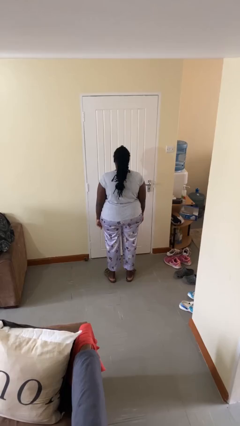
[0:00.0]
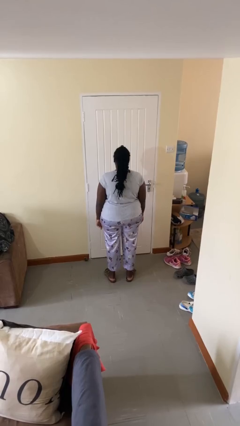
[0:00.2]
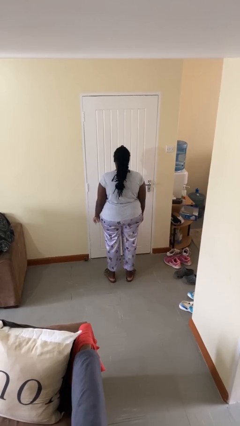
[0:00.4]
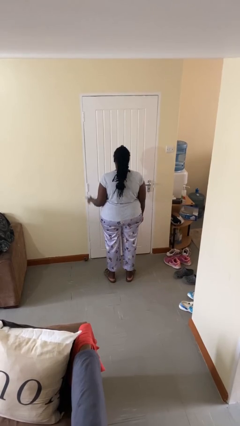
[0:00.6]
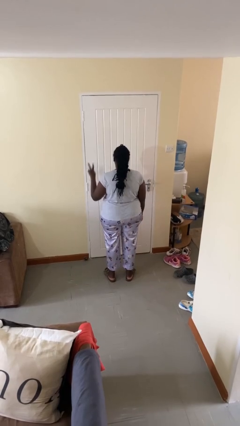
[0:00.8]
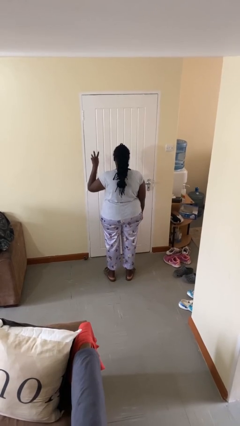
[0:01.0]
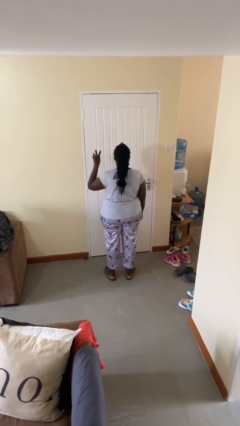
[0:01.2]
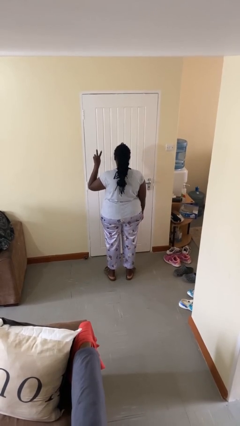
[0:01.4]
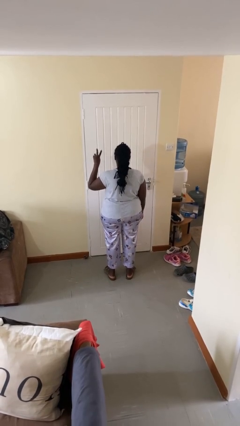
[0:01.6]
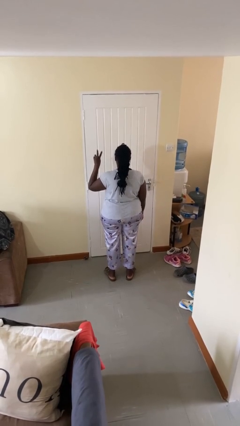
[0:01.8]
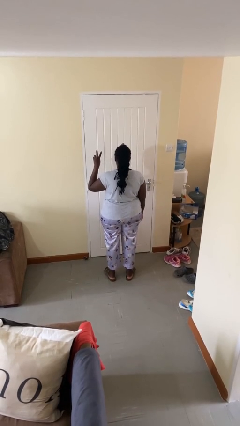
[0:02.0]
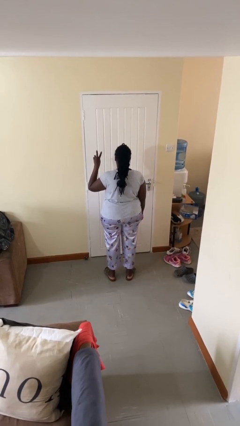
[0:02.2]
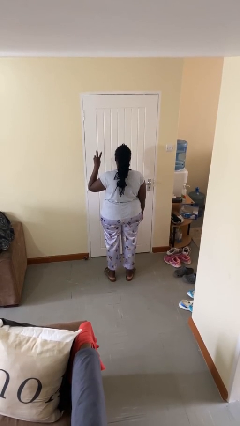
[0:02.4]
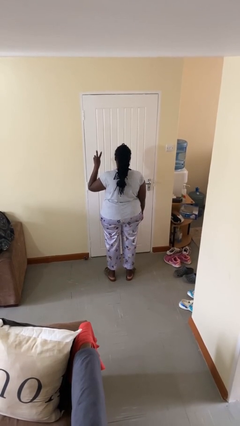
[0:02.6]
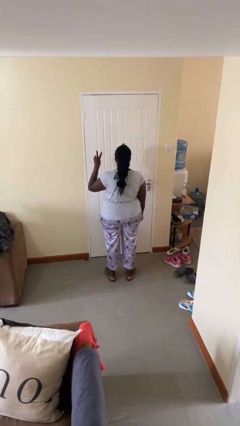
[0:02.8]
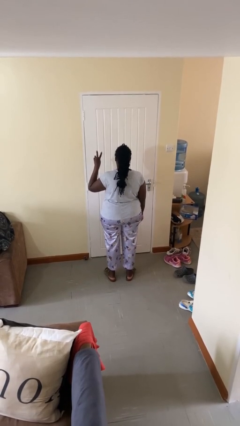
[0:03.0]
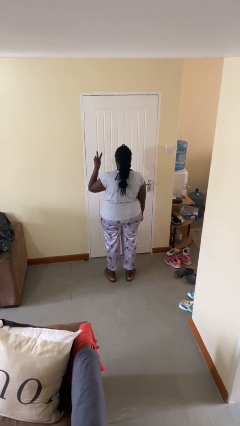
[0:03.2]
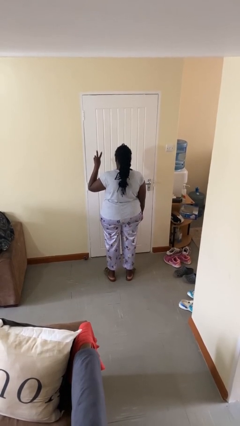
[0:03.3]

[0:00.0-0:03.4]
person gestures peace

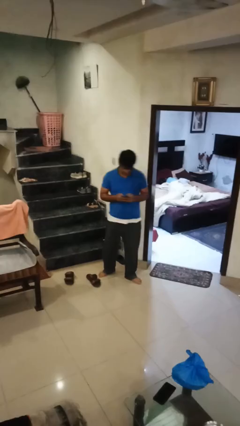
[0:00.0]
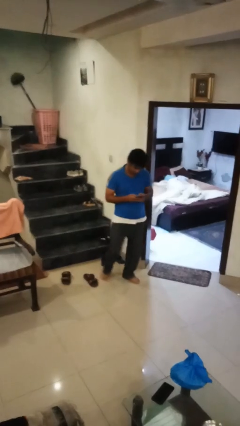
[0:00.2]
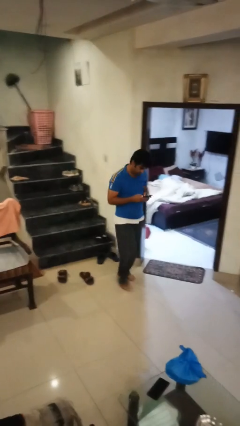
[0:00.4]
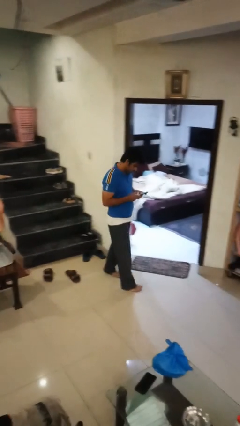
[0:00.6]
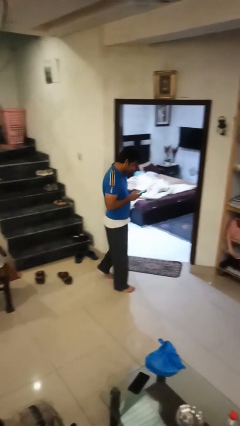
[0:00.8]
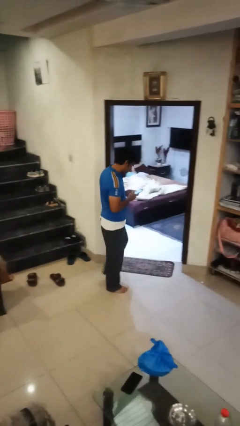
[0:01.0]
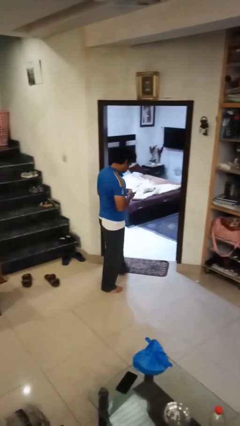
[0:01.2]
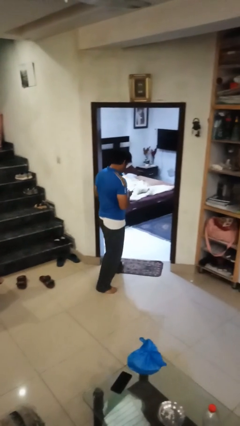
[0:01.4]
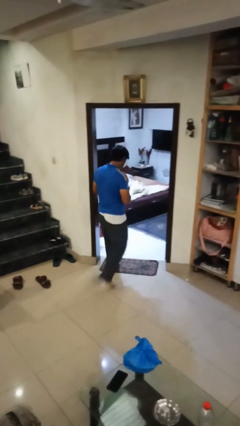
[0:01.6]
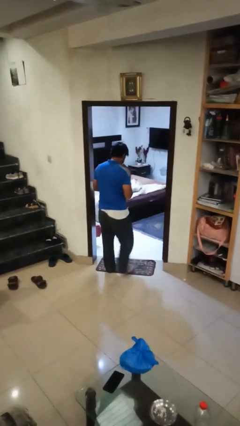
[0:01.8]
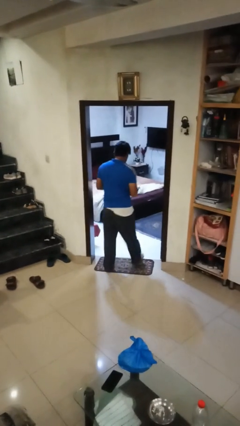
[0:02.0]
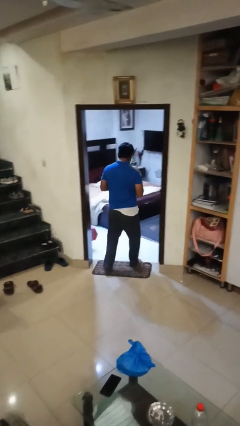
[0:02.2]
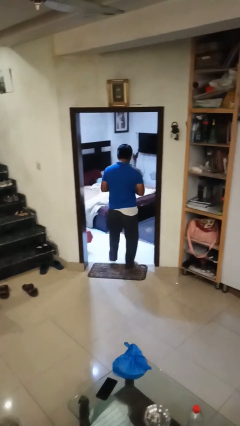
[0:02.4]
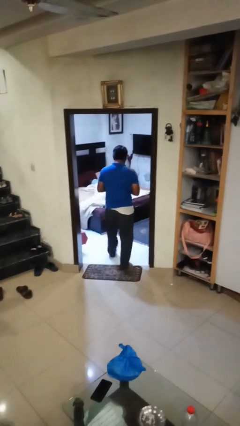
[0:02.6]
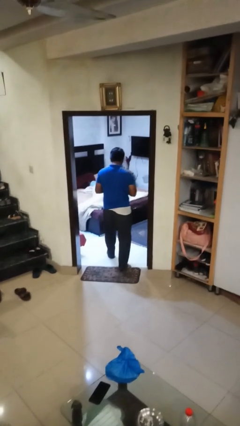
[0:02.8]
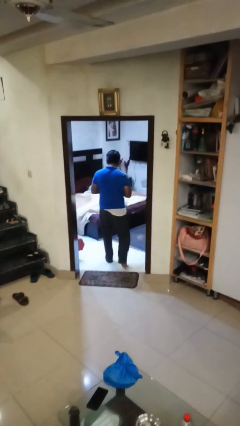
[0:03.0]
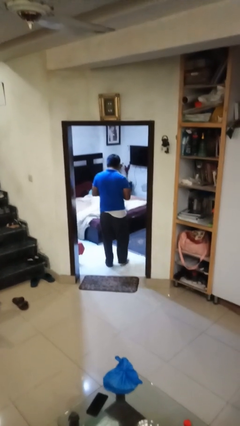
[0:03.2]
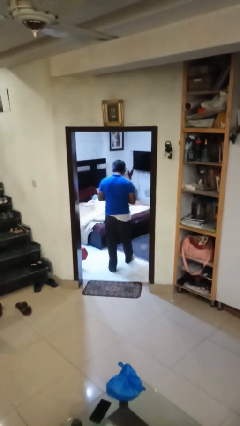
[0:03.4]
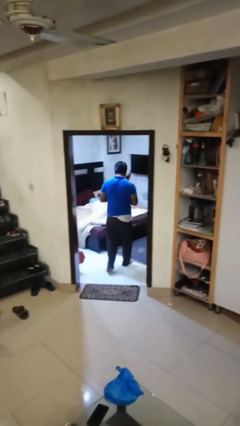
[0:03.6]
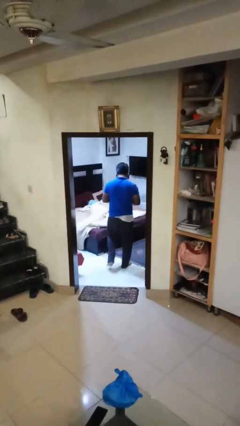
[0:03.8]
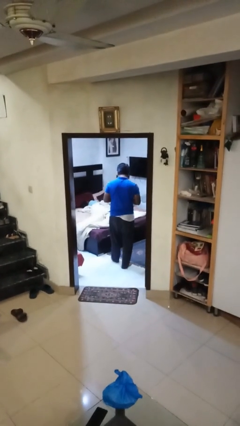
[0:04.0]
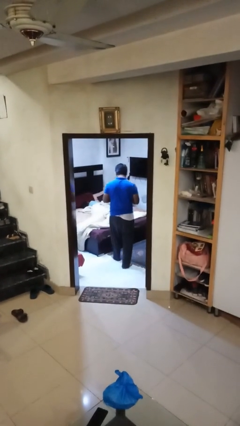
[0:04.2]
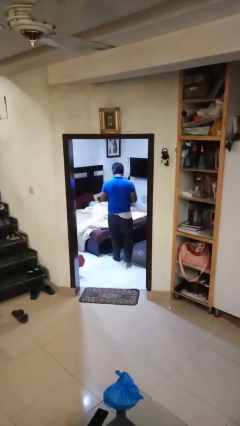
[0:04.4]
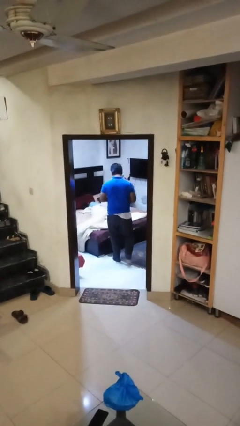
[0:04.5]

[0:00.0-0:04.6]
person exits scene through structure

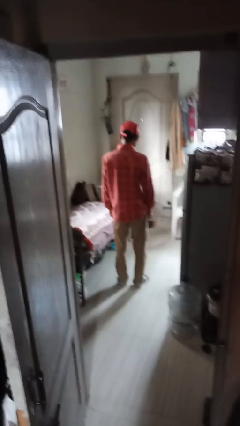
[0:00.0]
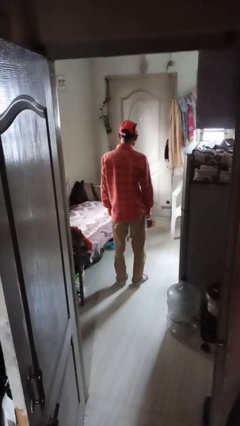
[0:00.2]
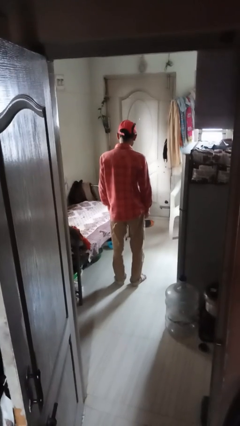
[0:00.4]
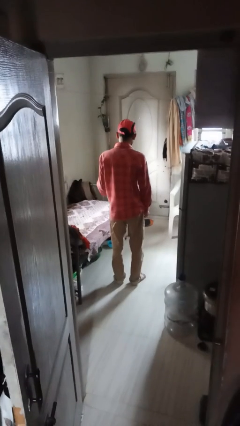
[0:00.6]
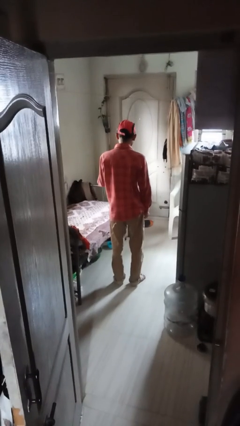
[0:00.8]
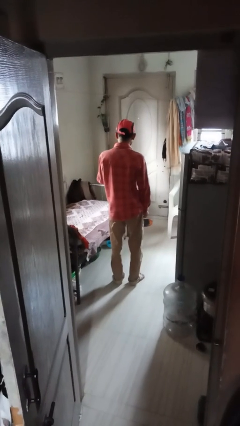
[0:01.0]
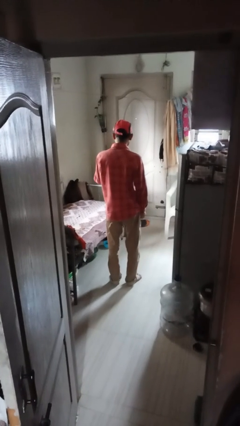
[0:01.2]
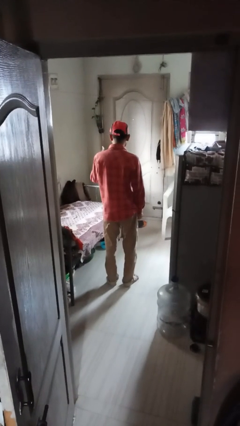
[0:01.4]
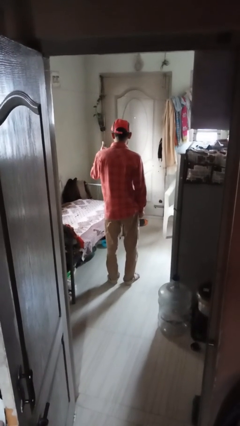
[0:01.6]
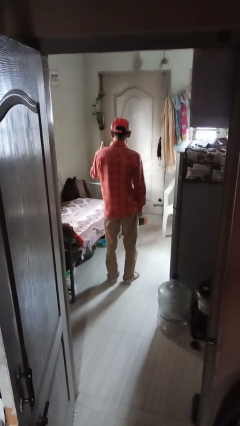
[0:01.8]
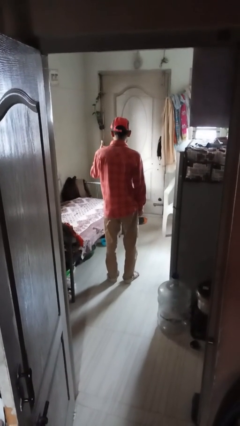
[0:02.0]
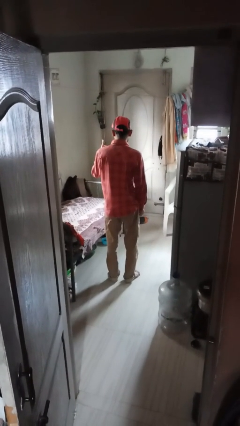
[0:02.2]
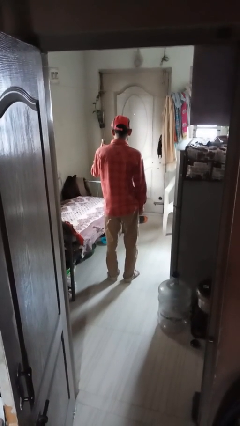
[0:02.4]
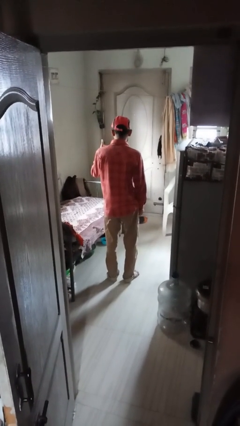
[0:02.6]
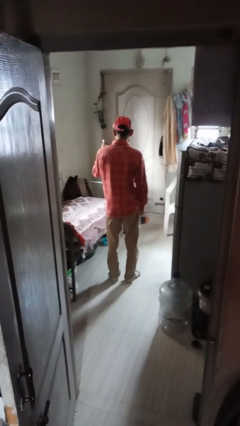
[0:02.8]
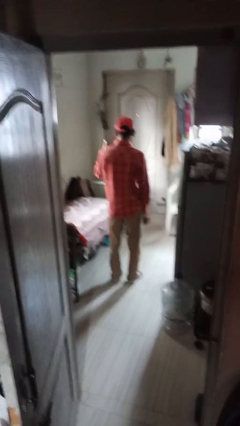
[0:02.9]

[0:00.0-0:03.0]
person gestures thumbs up

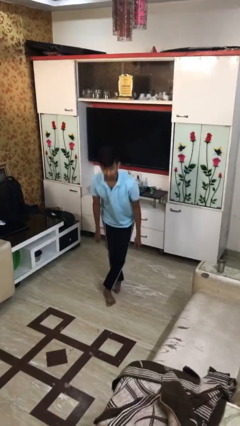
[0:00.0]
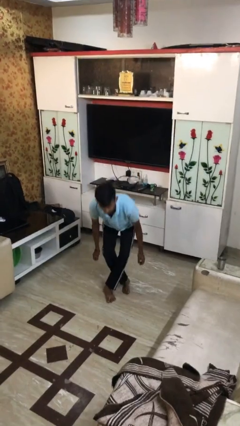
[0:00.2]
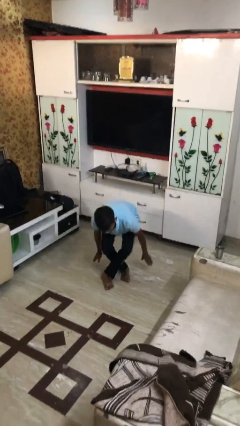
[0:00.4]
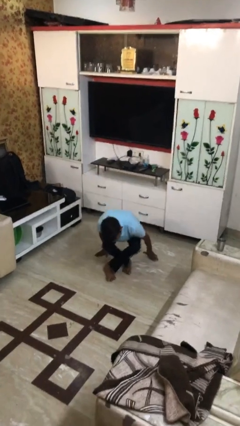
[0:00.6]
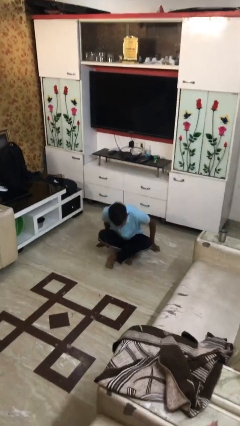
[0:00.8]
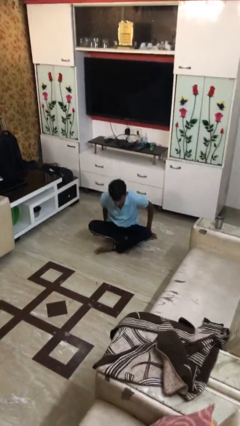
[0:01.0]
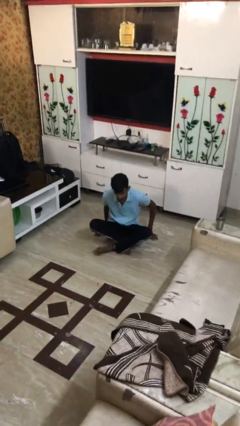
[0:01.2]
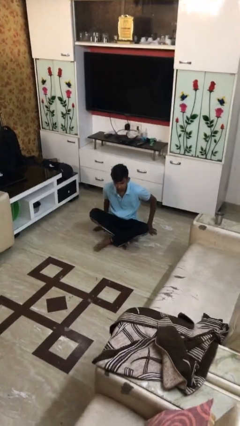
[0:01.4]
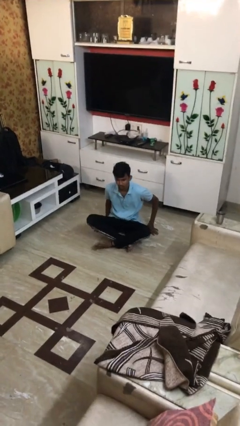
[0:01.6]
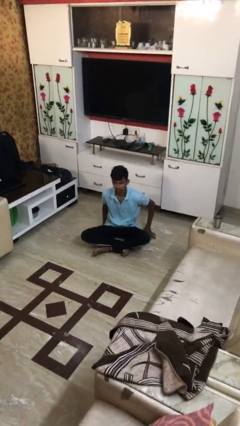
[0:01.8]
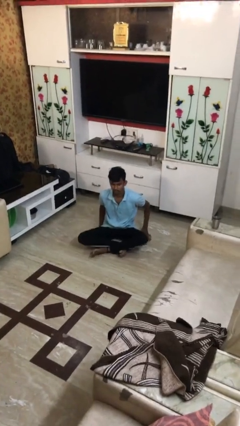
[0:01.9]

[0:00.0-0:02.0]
person sits crisscross

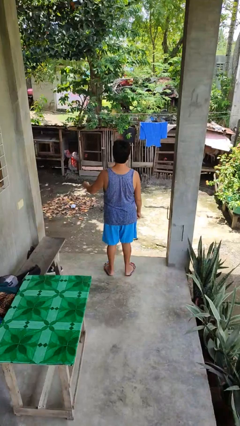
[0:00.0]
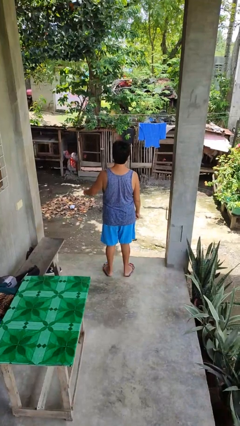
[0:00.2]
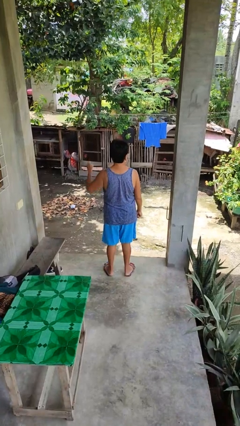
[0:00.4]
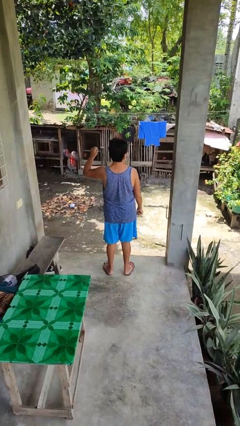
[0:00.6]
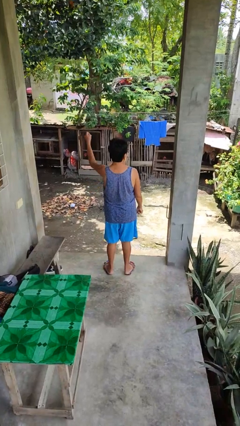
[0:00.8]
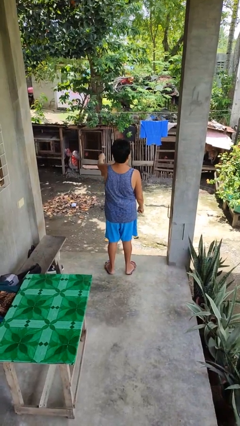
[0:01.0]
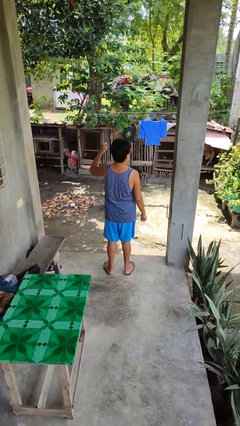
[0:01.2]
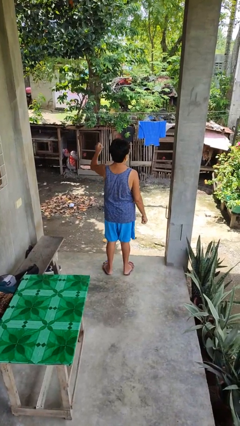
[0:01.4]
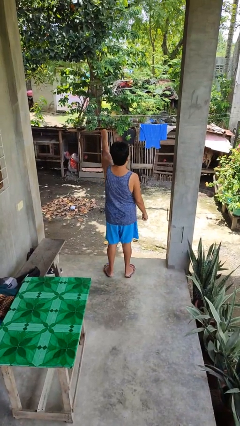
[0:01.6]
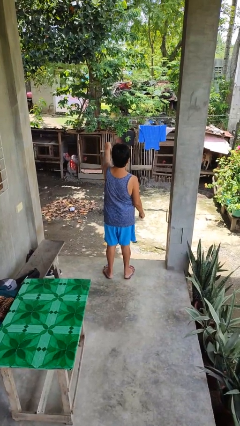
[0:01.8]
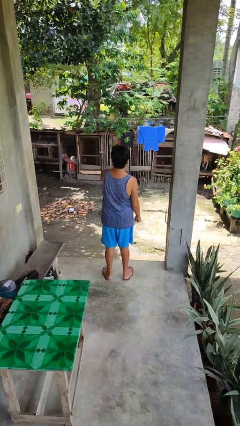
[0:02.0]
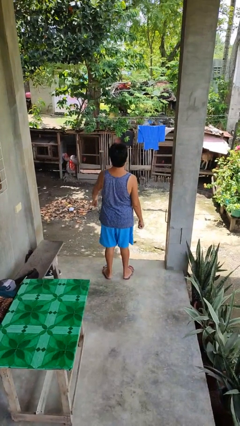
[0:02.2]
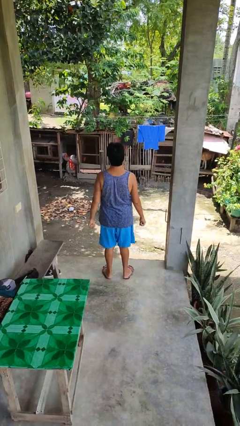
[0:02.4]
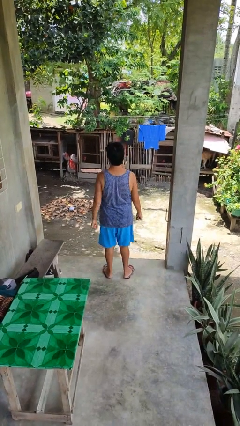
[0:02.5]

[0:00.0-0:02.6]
person punches

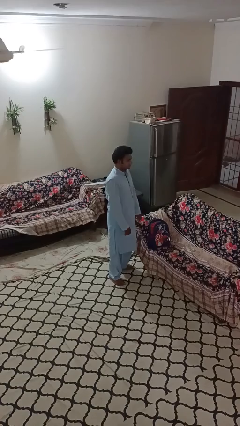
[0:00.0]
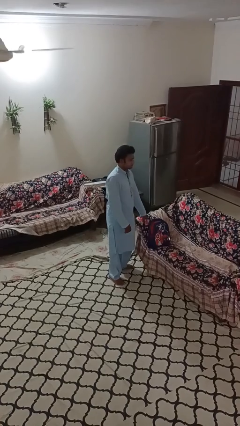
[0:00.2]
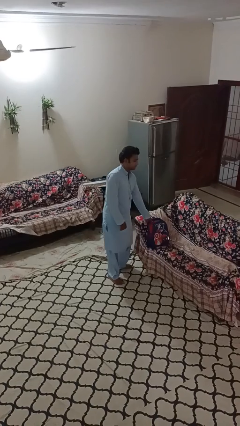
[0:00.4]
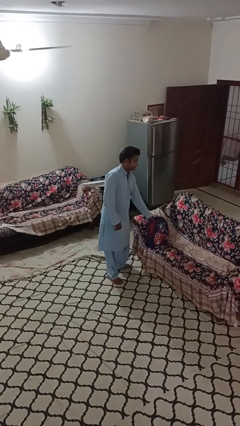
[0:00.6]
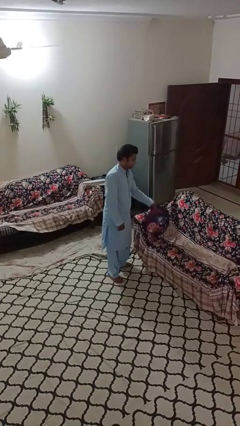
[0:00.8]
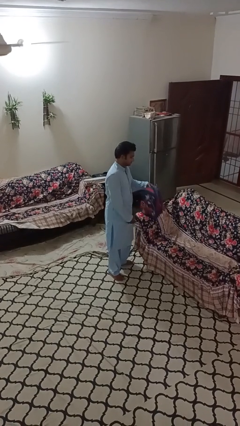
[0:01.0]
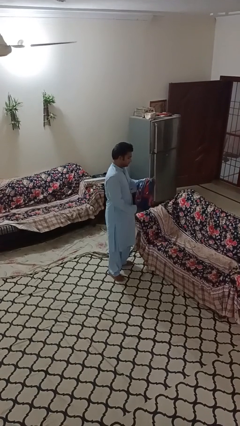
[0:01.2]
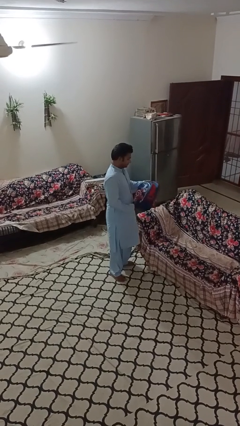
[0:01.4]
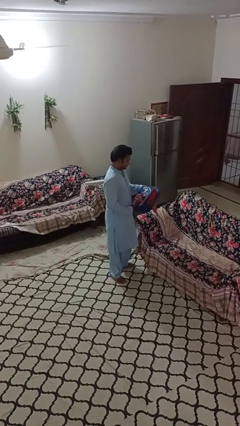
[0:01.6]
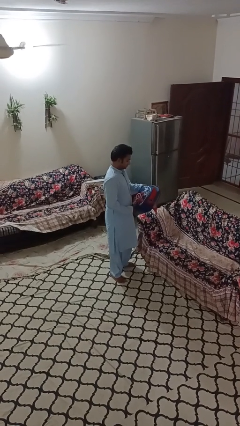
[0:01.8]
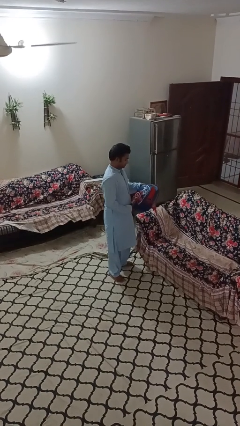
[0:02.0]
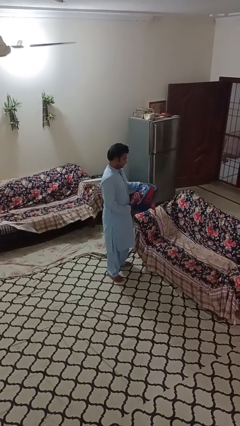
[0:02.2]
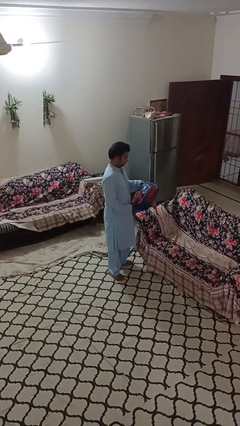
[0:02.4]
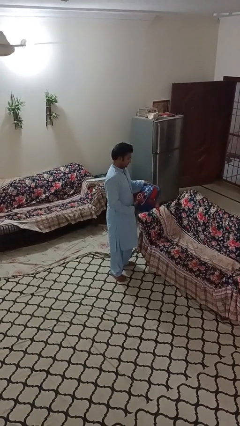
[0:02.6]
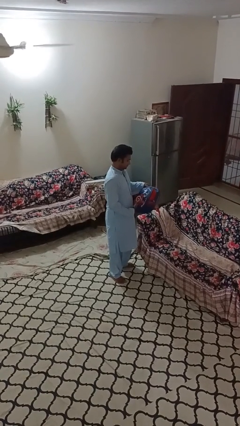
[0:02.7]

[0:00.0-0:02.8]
person picks up object from couch
